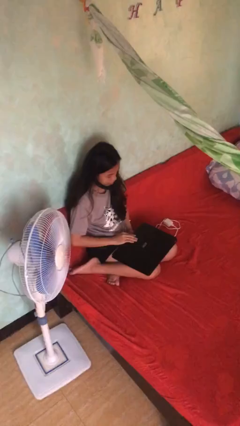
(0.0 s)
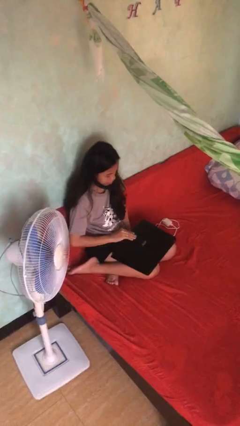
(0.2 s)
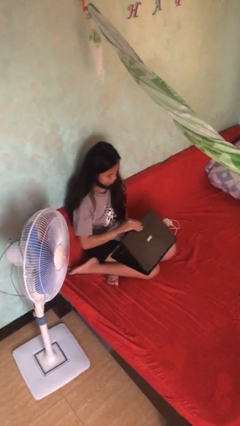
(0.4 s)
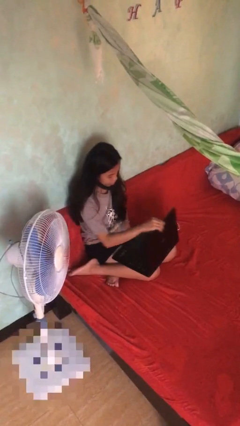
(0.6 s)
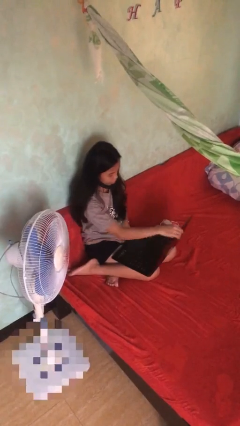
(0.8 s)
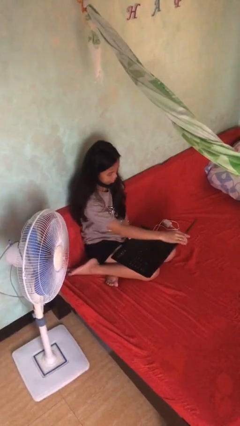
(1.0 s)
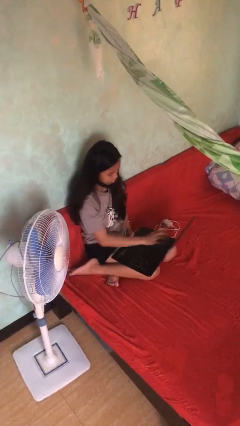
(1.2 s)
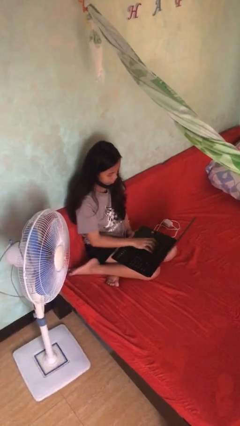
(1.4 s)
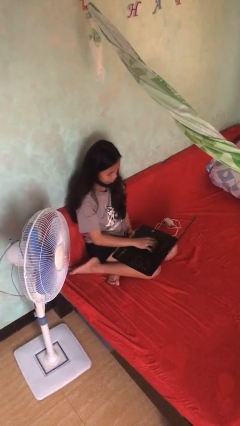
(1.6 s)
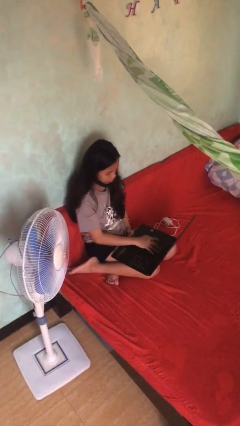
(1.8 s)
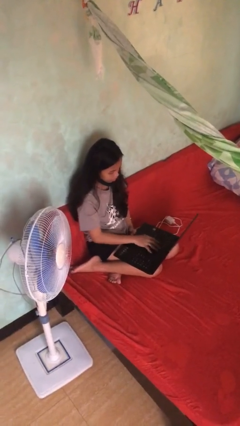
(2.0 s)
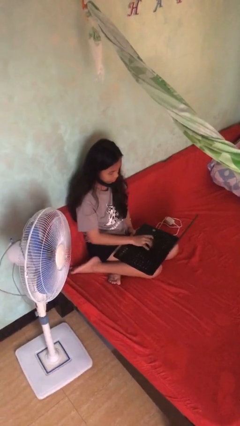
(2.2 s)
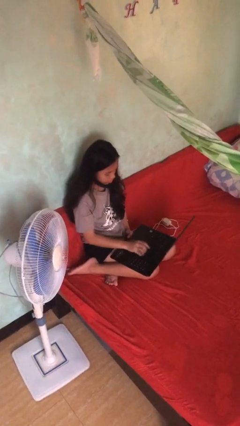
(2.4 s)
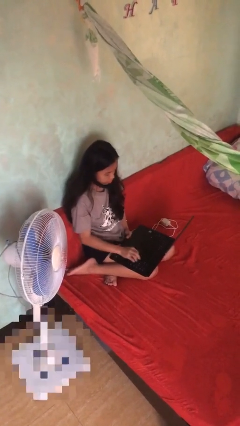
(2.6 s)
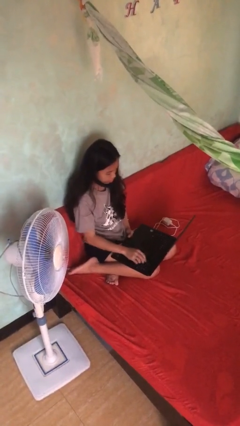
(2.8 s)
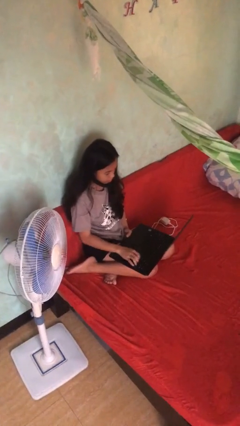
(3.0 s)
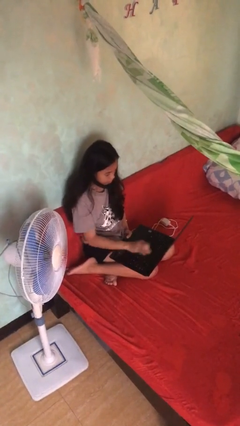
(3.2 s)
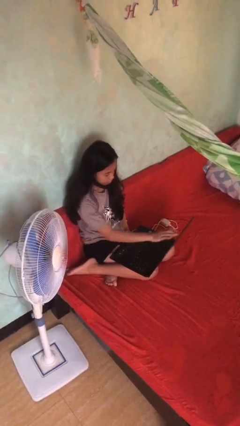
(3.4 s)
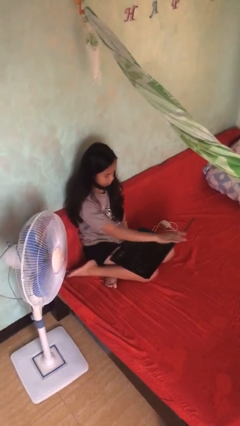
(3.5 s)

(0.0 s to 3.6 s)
person interacts with laptop

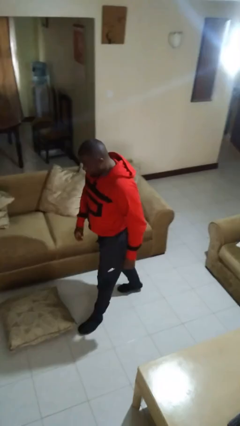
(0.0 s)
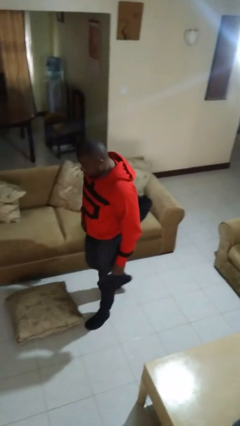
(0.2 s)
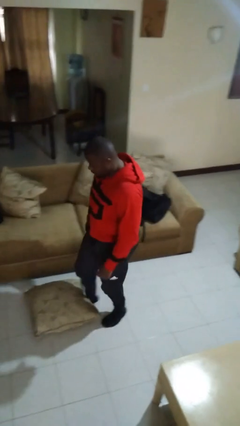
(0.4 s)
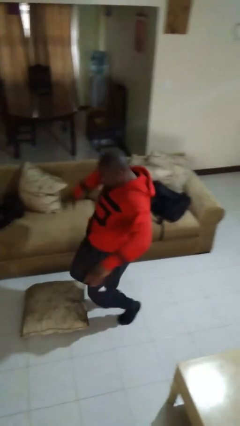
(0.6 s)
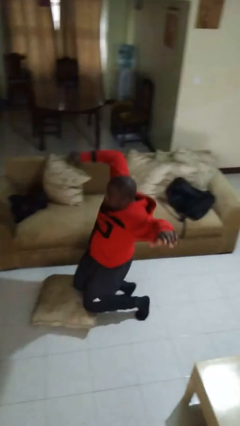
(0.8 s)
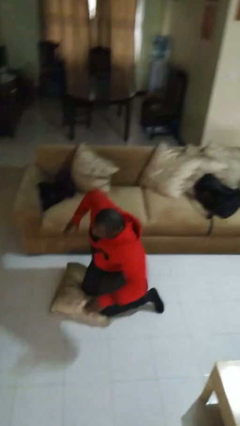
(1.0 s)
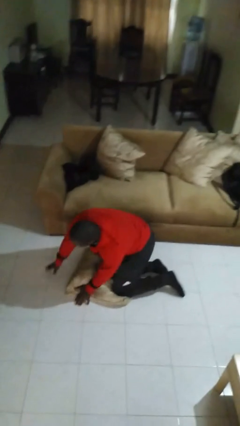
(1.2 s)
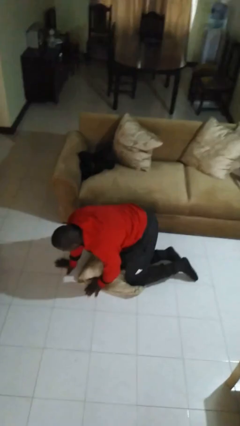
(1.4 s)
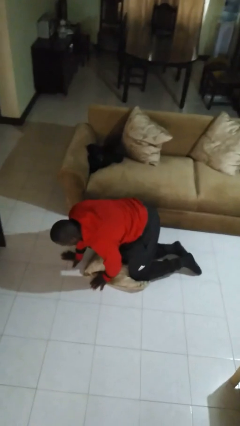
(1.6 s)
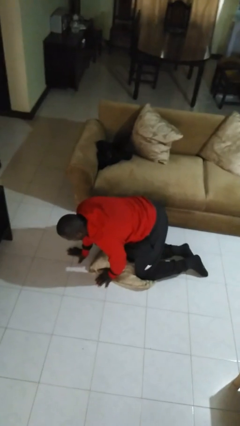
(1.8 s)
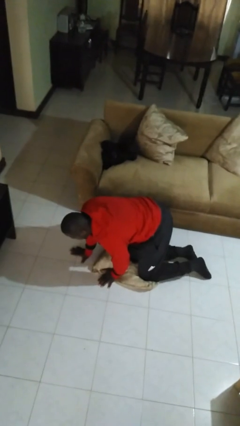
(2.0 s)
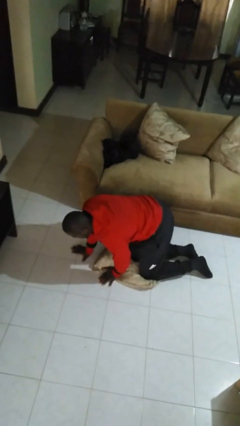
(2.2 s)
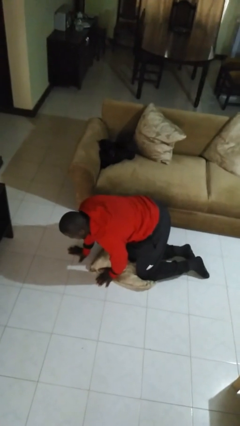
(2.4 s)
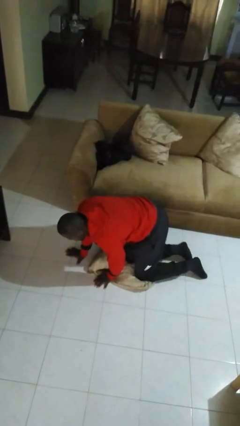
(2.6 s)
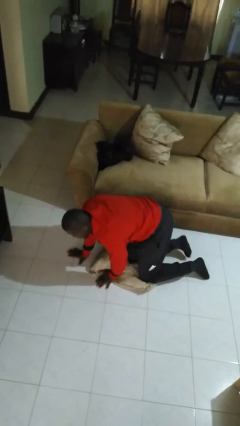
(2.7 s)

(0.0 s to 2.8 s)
person trips on object on floor

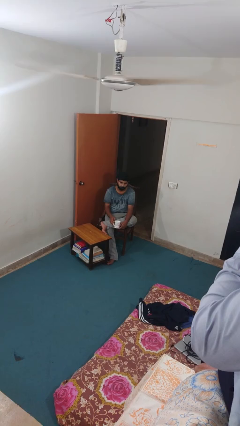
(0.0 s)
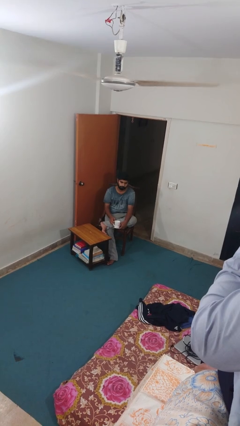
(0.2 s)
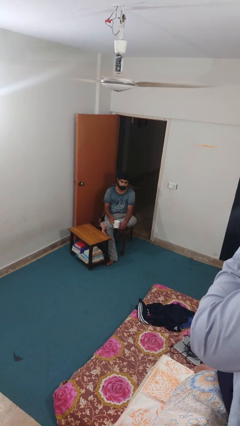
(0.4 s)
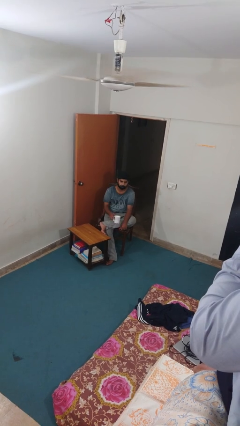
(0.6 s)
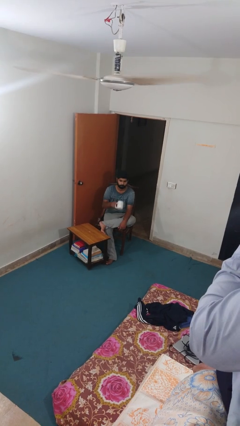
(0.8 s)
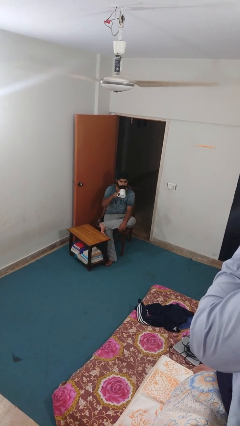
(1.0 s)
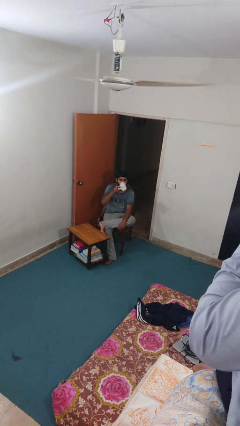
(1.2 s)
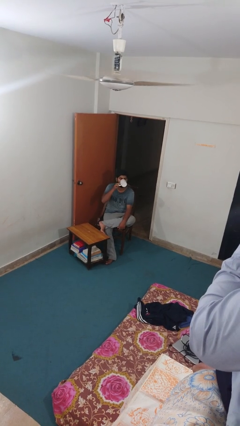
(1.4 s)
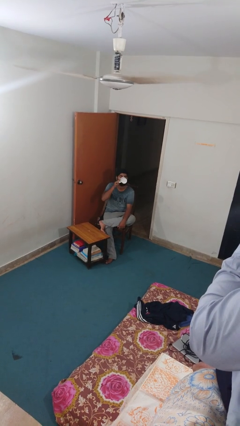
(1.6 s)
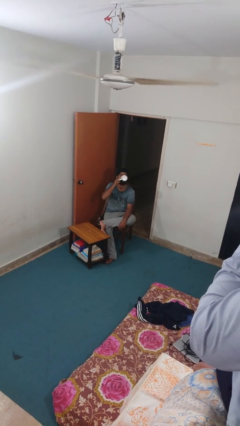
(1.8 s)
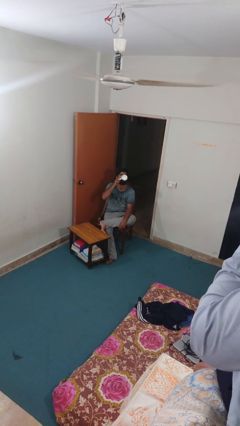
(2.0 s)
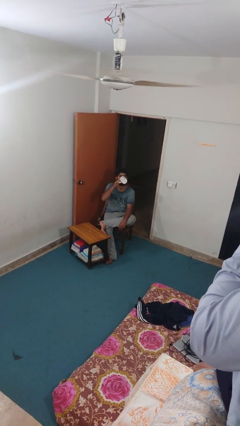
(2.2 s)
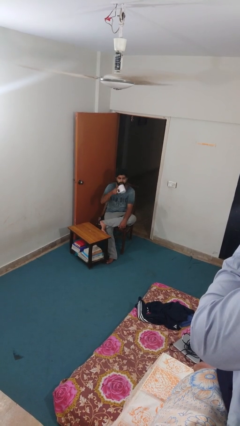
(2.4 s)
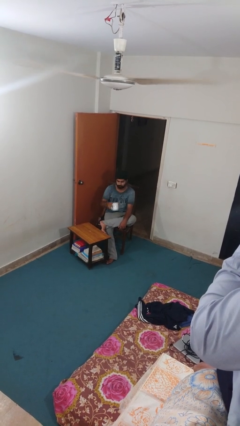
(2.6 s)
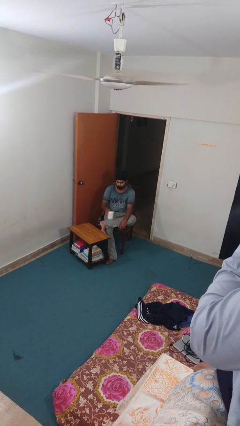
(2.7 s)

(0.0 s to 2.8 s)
person drinks from mug

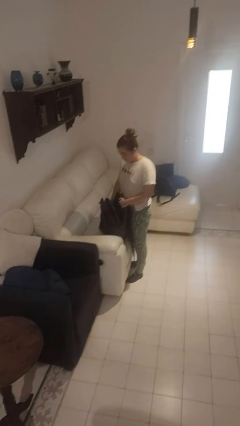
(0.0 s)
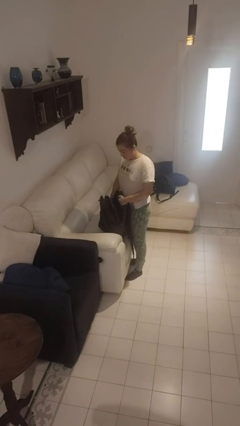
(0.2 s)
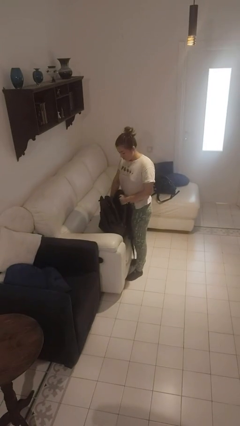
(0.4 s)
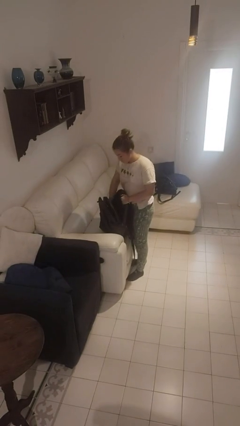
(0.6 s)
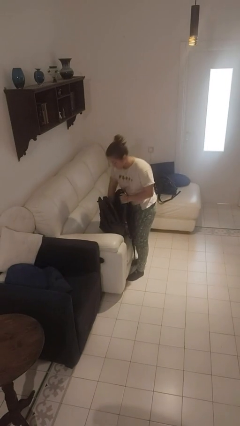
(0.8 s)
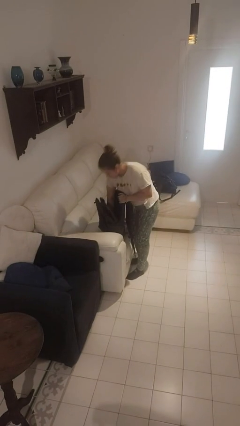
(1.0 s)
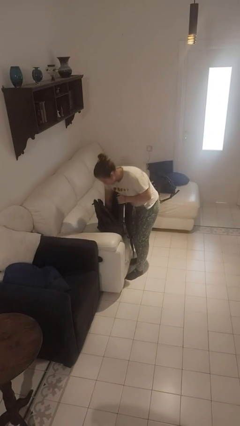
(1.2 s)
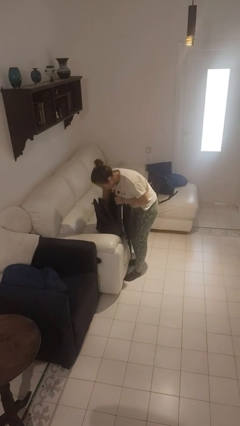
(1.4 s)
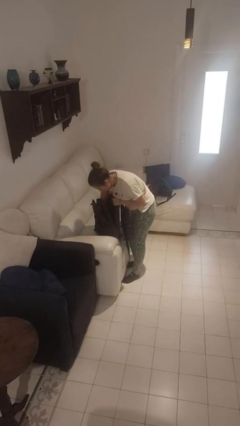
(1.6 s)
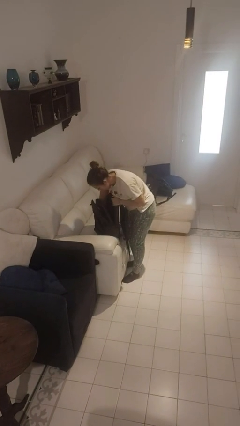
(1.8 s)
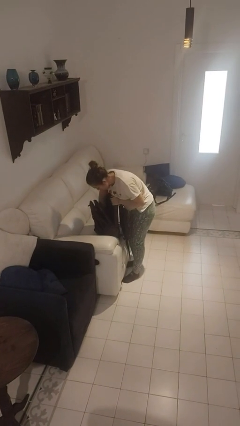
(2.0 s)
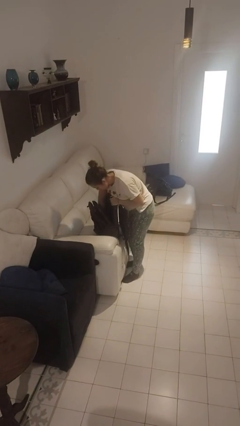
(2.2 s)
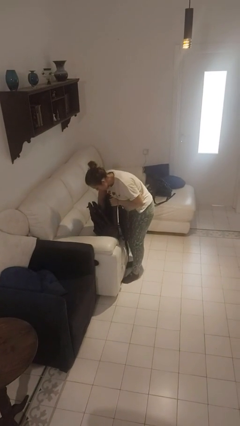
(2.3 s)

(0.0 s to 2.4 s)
person searches in backpack

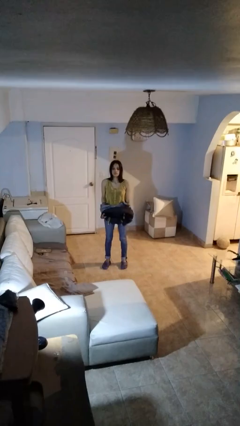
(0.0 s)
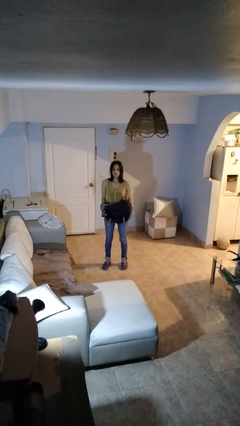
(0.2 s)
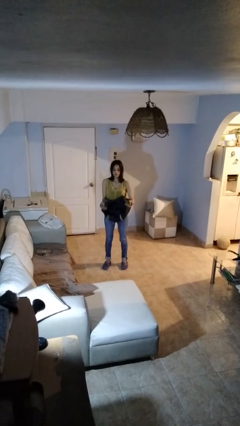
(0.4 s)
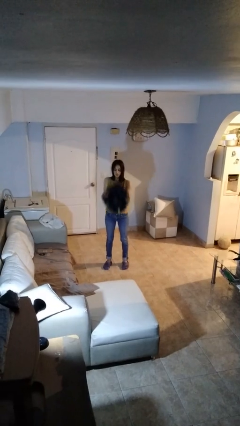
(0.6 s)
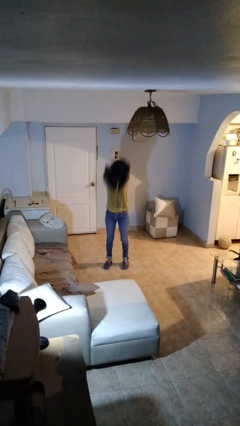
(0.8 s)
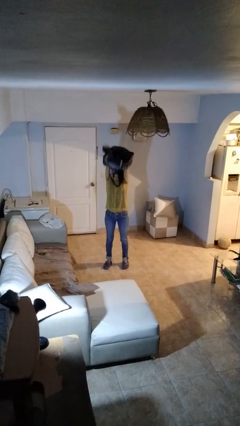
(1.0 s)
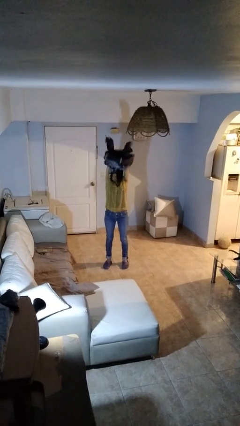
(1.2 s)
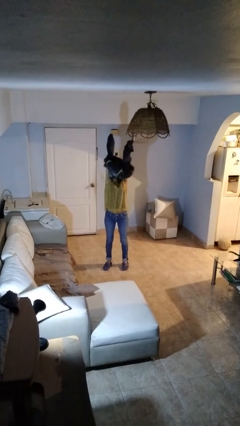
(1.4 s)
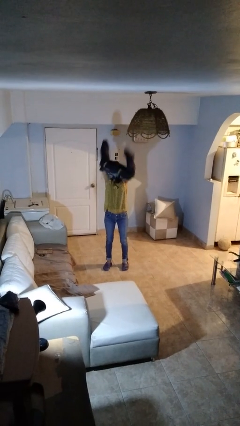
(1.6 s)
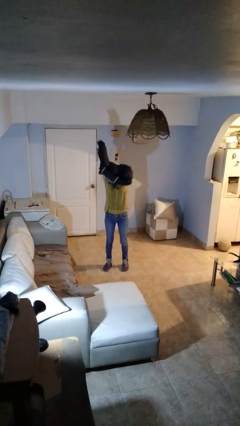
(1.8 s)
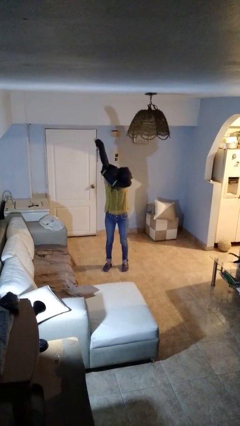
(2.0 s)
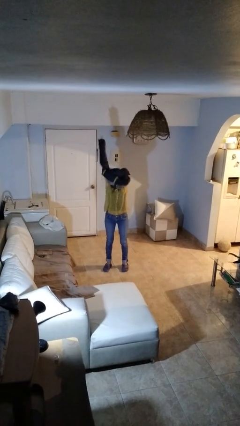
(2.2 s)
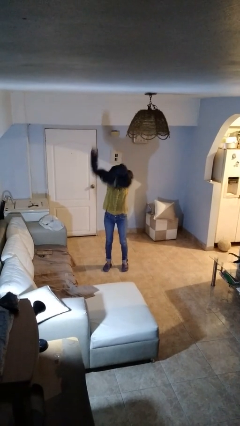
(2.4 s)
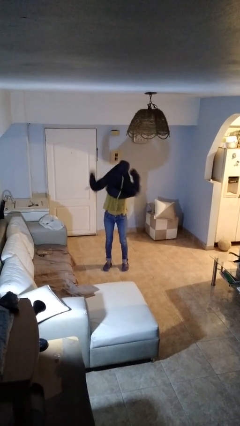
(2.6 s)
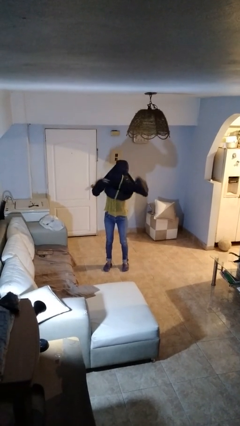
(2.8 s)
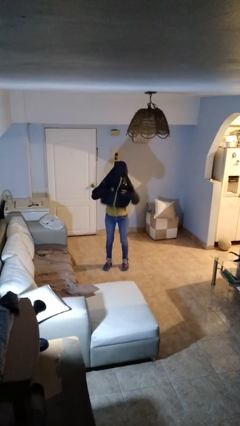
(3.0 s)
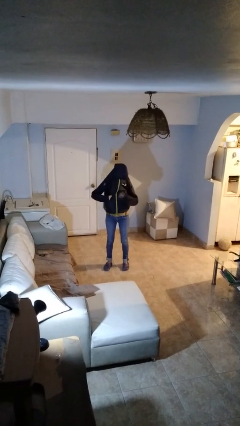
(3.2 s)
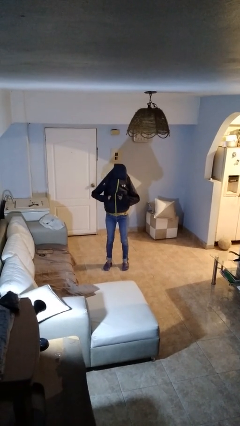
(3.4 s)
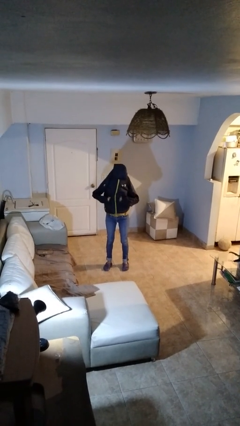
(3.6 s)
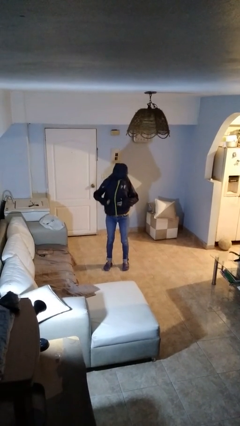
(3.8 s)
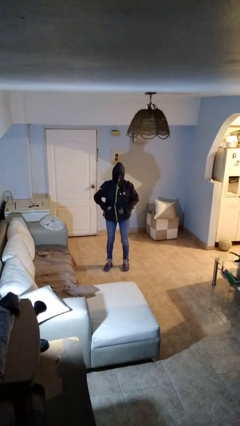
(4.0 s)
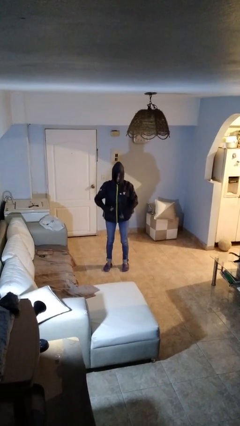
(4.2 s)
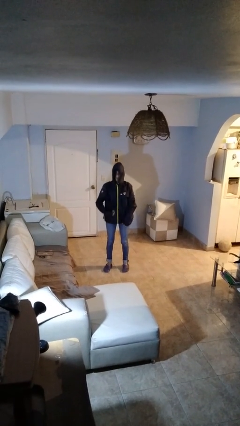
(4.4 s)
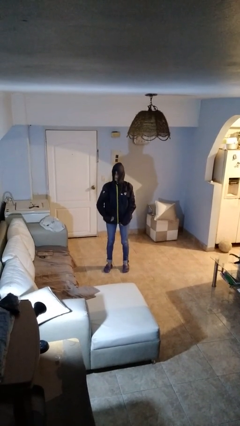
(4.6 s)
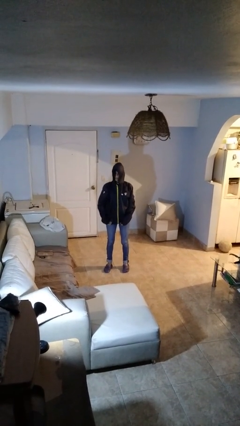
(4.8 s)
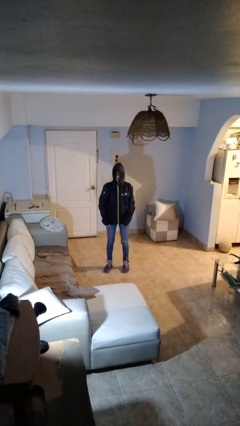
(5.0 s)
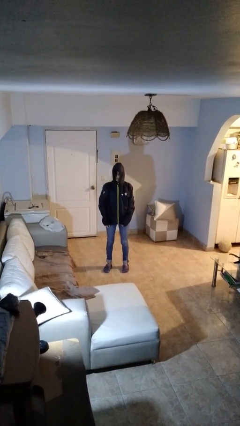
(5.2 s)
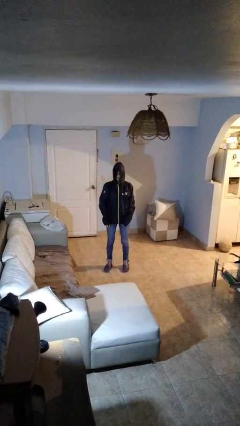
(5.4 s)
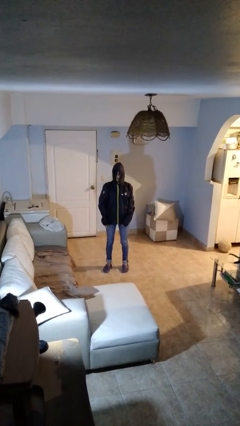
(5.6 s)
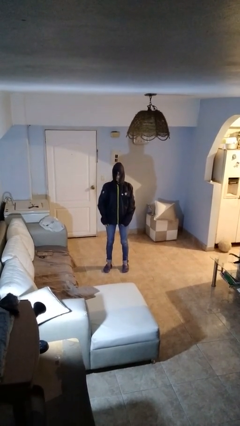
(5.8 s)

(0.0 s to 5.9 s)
person puts on hoodie

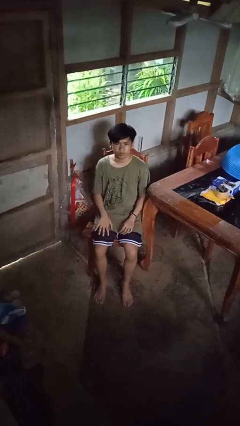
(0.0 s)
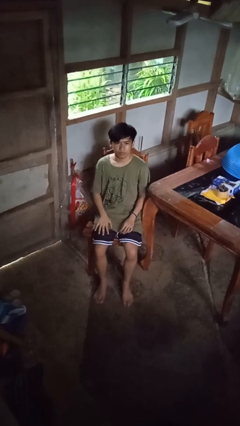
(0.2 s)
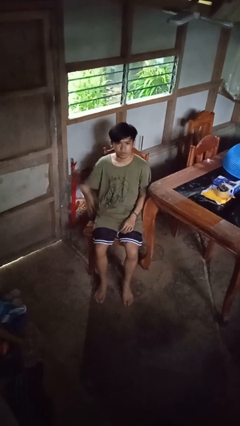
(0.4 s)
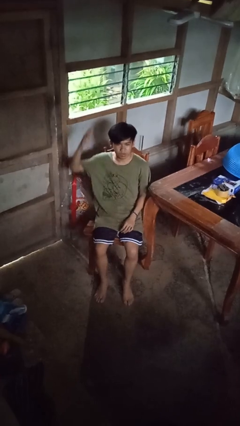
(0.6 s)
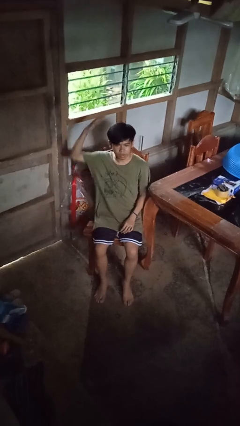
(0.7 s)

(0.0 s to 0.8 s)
person pats head
